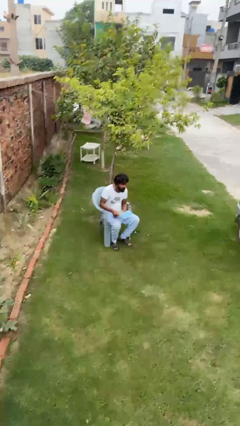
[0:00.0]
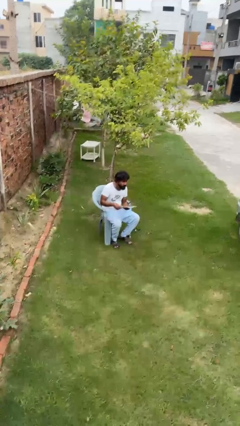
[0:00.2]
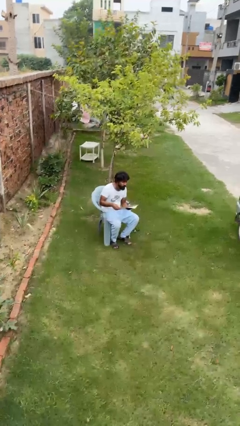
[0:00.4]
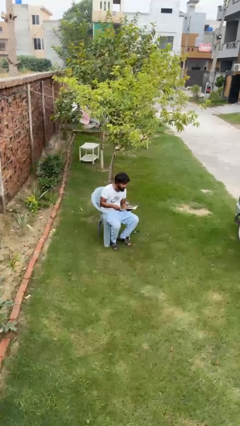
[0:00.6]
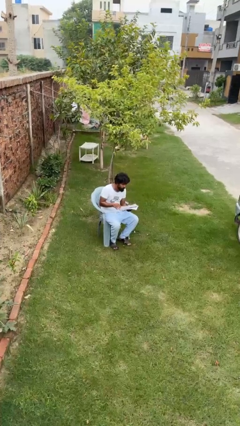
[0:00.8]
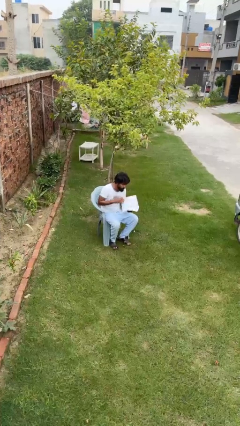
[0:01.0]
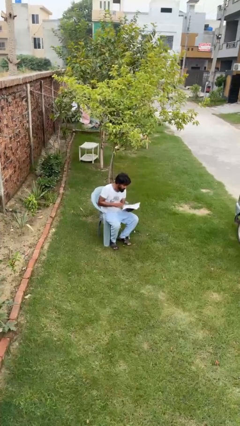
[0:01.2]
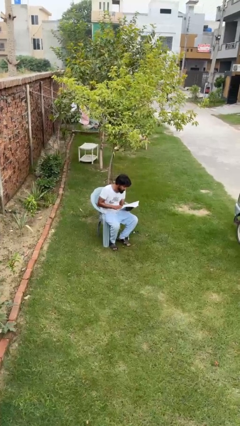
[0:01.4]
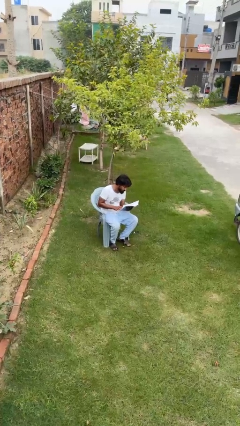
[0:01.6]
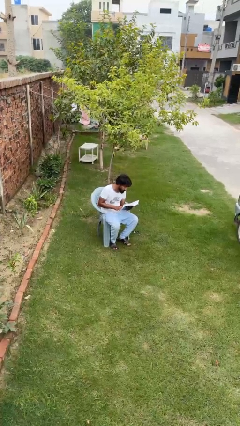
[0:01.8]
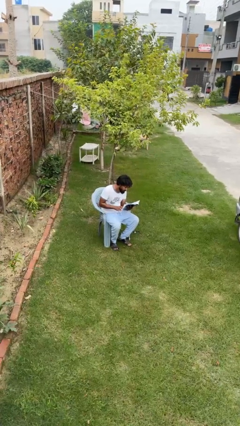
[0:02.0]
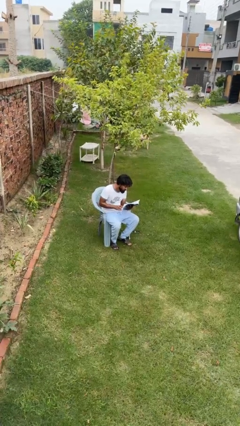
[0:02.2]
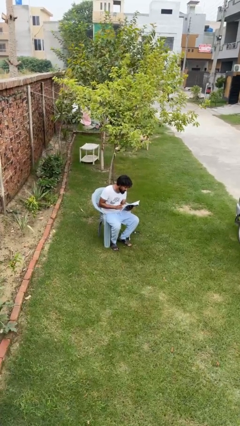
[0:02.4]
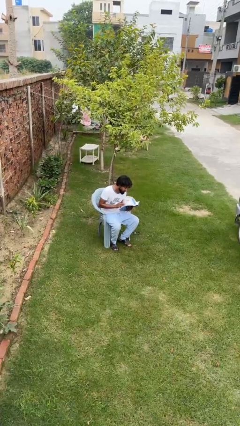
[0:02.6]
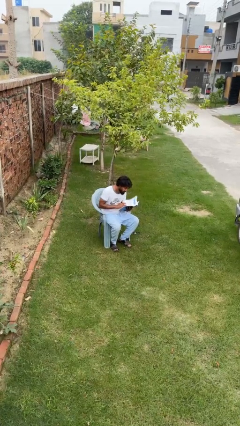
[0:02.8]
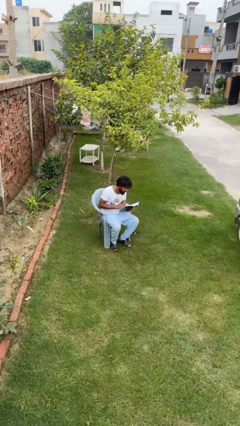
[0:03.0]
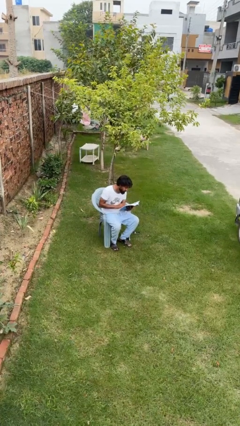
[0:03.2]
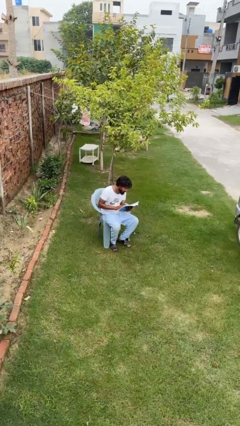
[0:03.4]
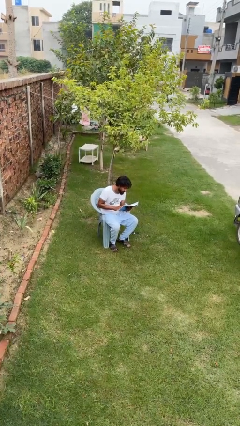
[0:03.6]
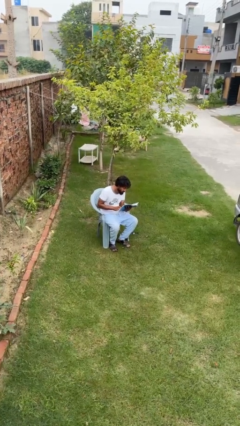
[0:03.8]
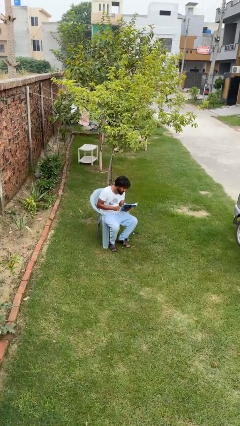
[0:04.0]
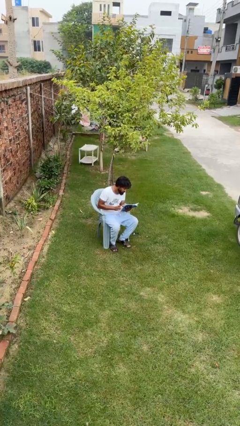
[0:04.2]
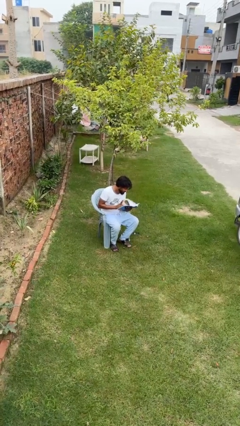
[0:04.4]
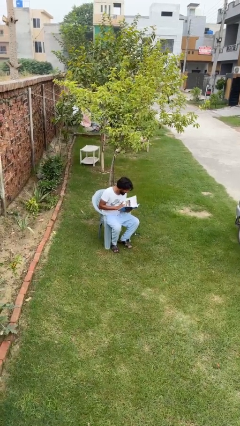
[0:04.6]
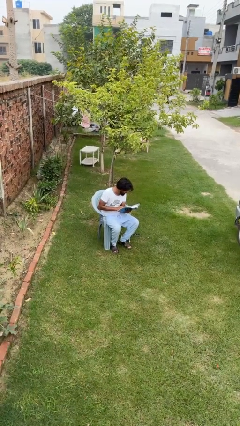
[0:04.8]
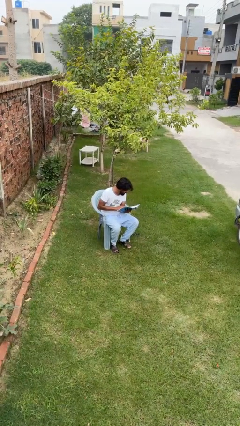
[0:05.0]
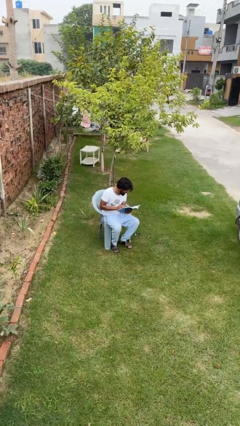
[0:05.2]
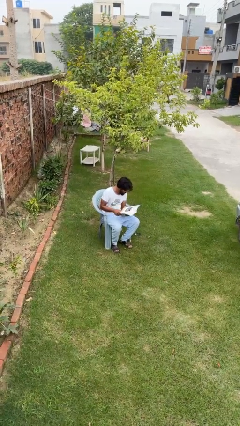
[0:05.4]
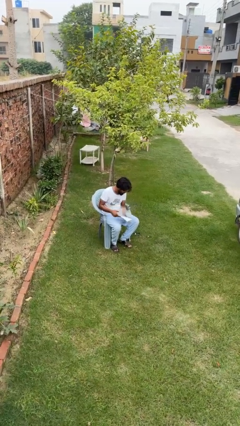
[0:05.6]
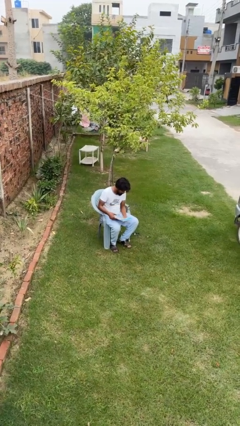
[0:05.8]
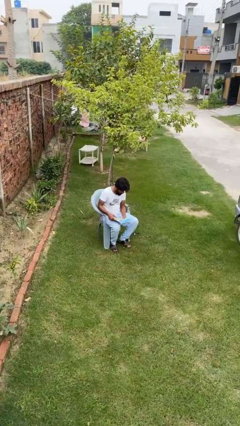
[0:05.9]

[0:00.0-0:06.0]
person reads book

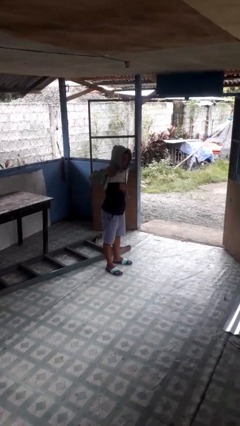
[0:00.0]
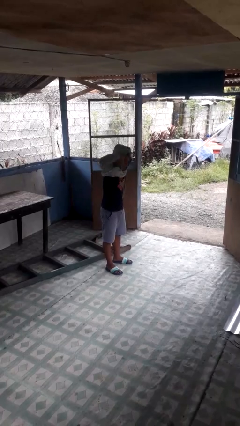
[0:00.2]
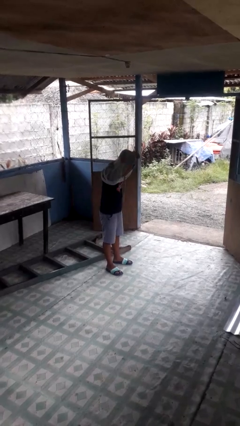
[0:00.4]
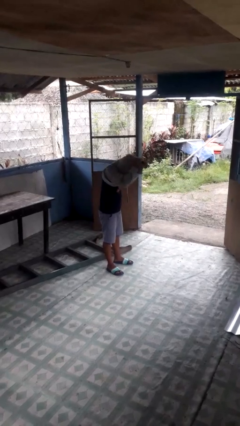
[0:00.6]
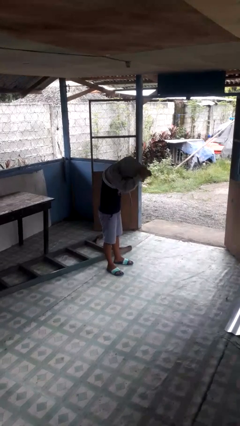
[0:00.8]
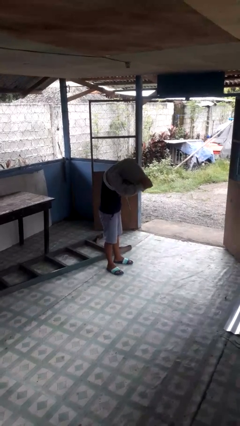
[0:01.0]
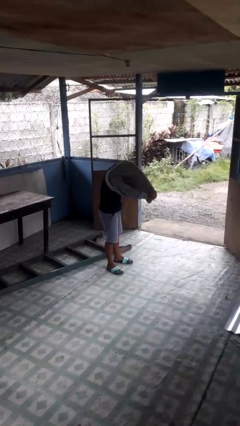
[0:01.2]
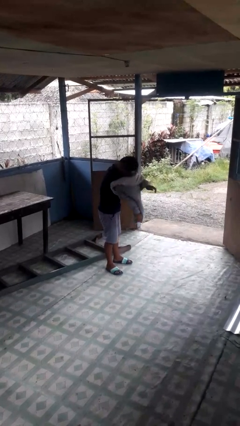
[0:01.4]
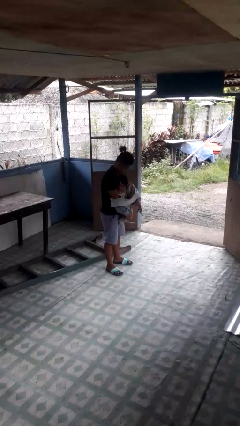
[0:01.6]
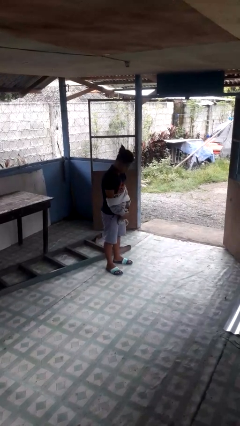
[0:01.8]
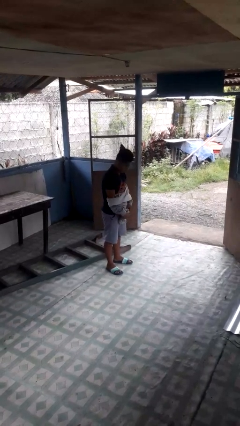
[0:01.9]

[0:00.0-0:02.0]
person takes off hoodie

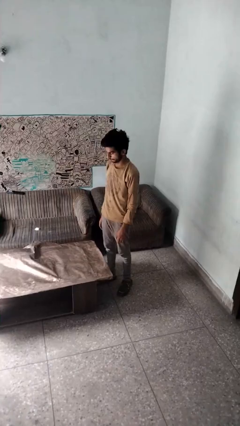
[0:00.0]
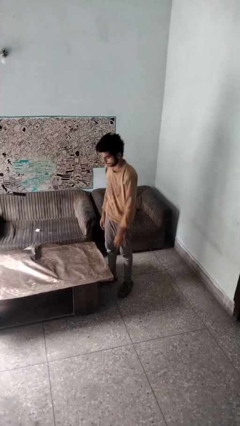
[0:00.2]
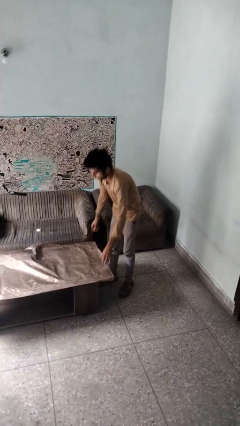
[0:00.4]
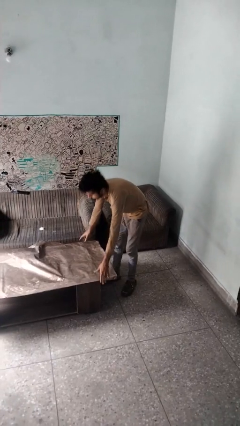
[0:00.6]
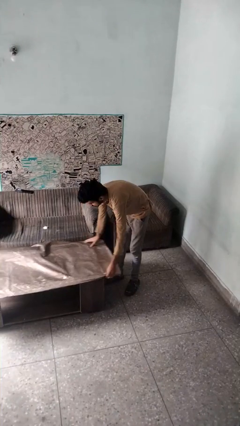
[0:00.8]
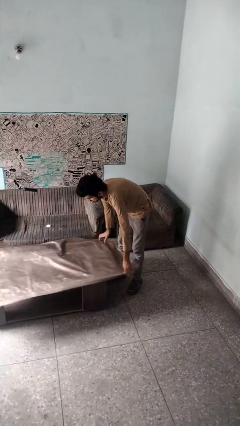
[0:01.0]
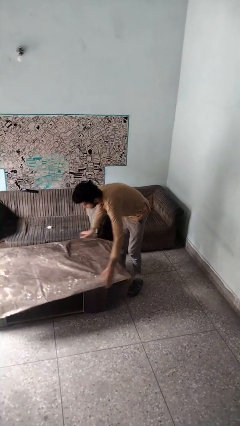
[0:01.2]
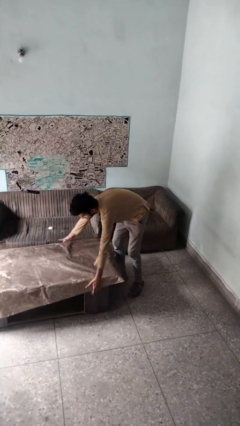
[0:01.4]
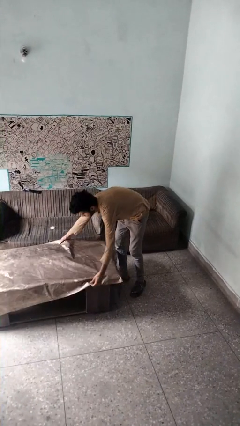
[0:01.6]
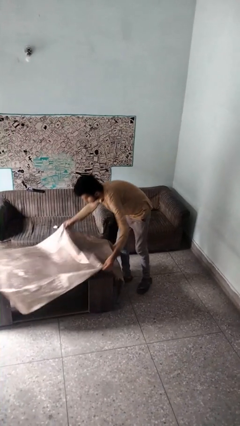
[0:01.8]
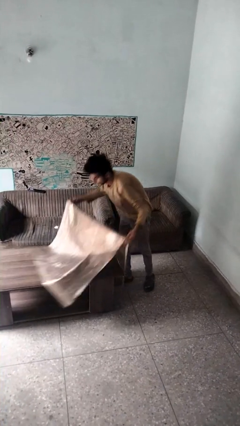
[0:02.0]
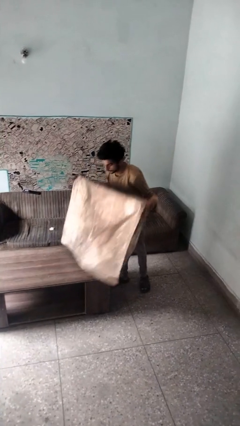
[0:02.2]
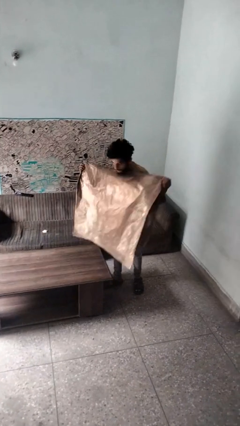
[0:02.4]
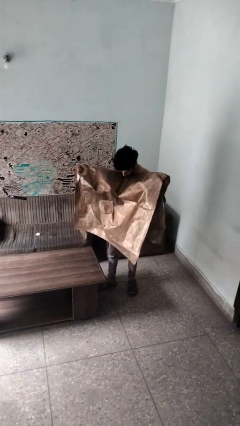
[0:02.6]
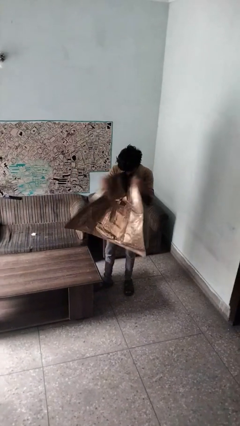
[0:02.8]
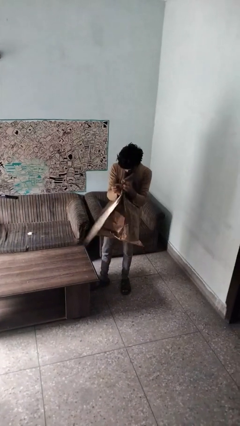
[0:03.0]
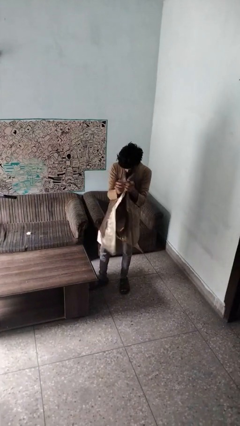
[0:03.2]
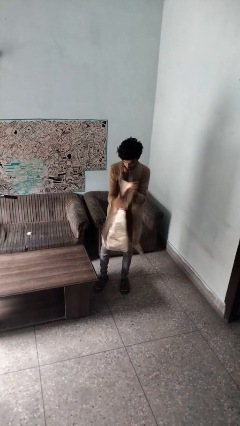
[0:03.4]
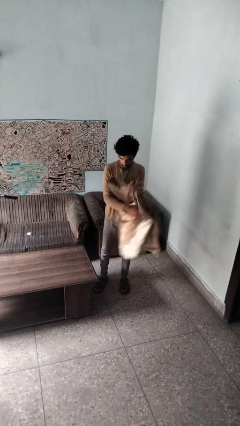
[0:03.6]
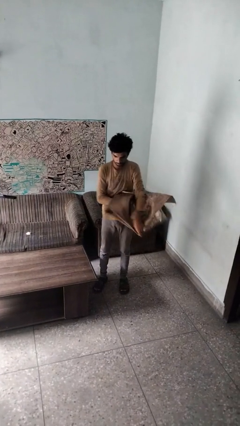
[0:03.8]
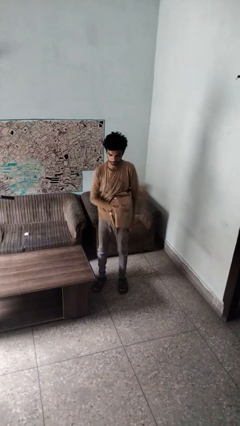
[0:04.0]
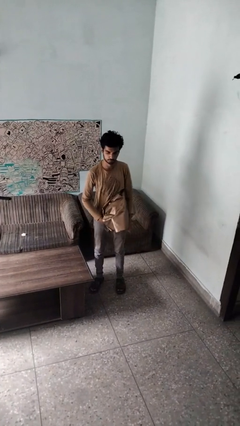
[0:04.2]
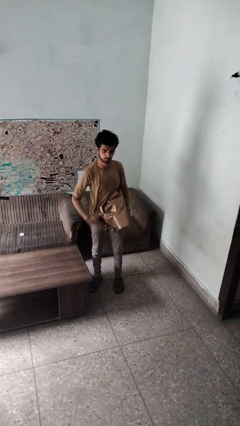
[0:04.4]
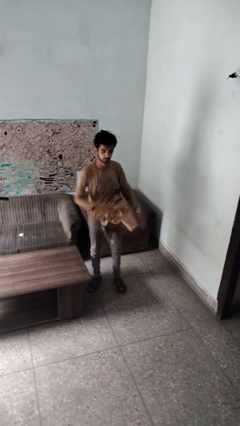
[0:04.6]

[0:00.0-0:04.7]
person folds tablecloth

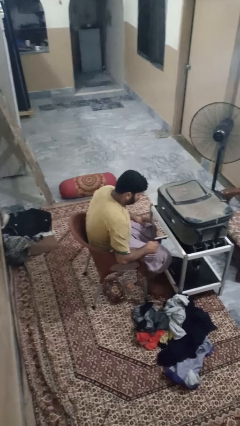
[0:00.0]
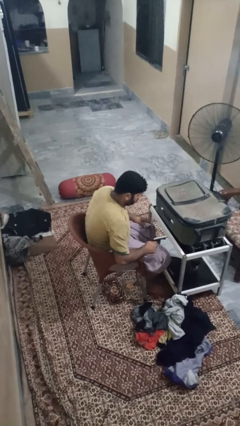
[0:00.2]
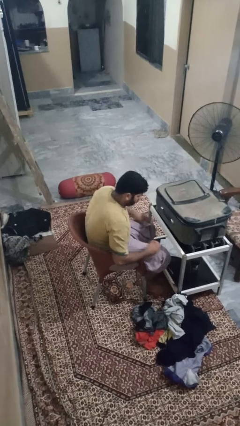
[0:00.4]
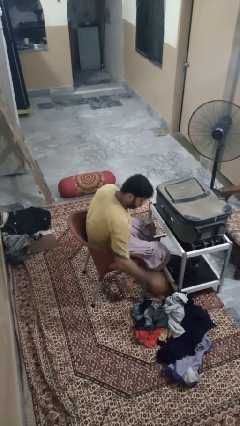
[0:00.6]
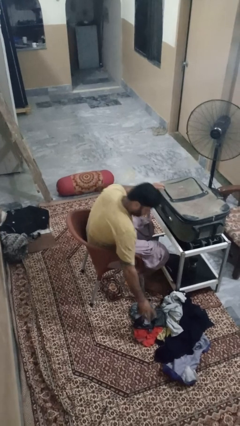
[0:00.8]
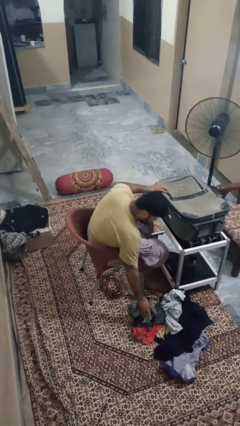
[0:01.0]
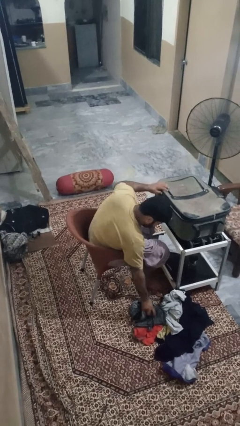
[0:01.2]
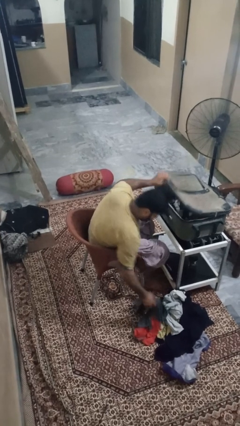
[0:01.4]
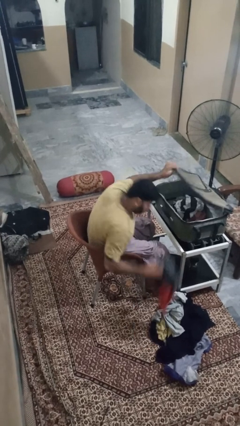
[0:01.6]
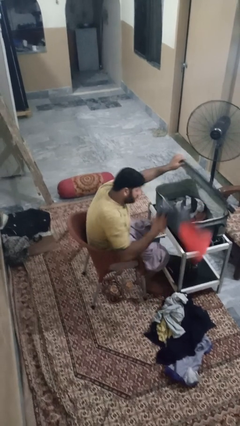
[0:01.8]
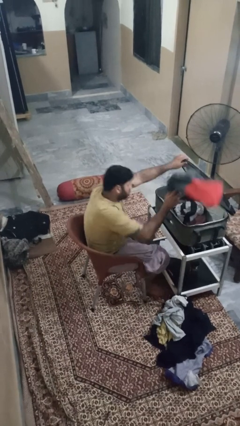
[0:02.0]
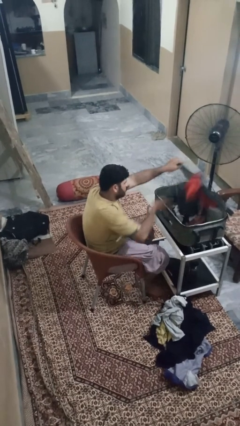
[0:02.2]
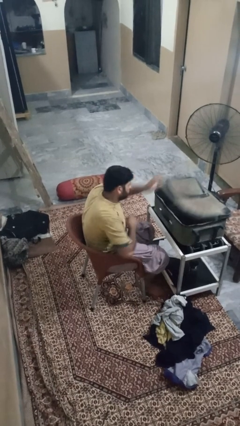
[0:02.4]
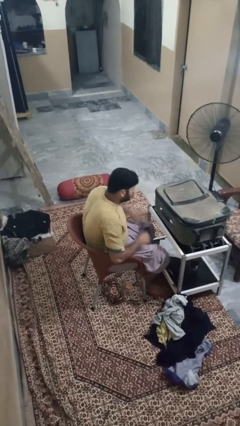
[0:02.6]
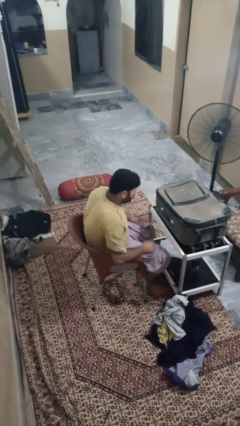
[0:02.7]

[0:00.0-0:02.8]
person loads clothes into suitcase

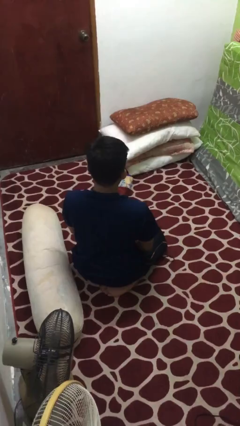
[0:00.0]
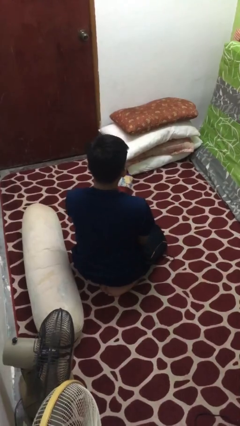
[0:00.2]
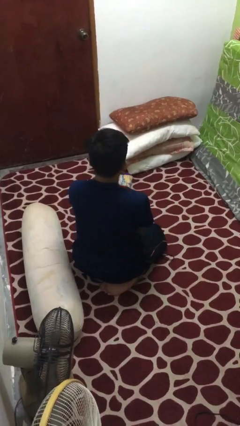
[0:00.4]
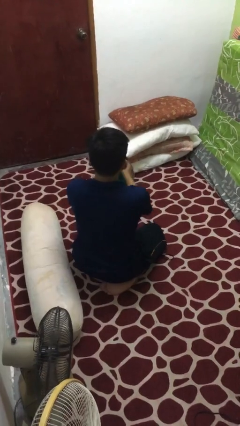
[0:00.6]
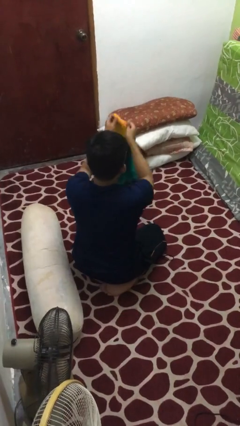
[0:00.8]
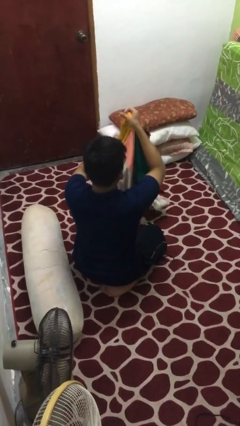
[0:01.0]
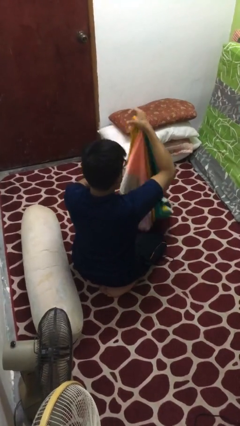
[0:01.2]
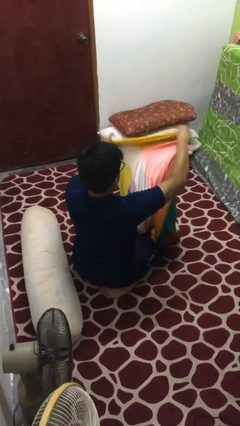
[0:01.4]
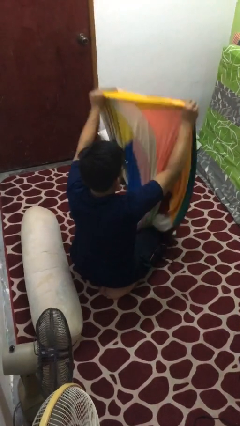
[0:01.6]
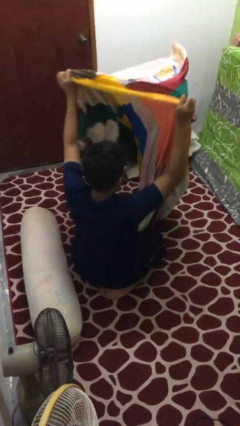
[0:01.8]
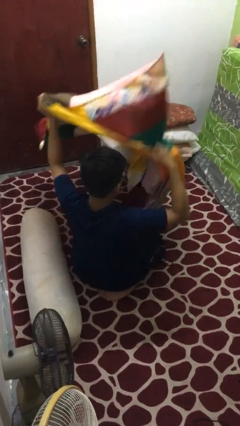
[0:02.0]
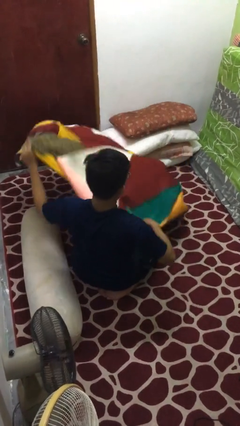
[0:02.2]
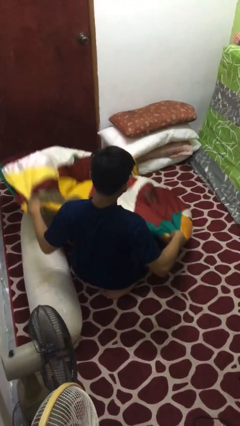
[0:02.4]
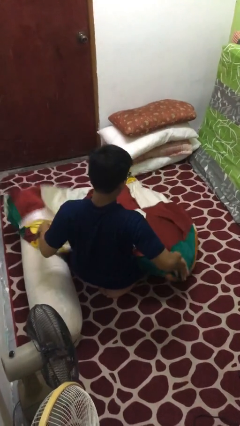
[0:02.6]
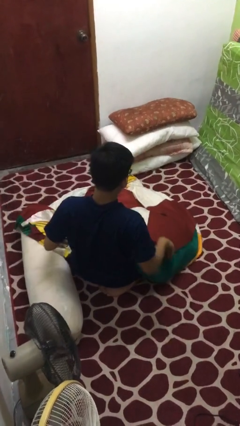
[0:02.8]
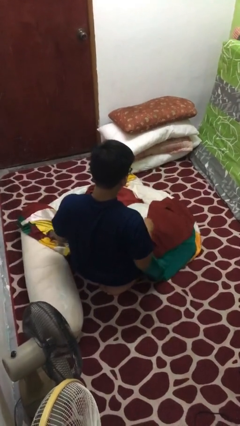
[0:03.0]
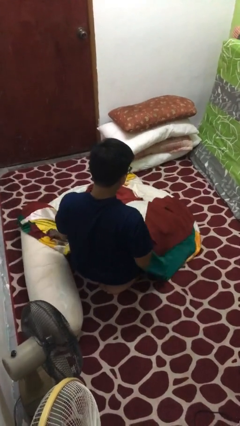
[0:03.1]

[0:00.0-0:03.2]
person unfolds blanket
